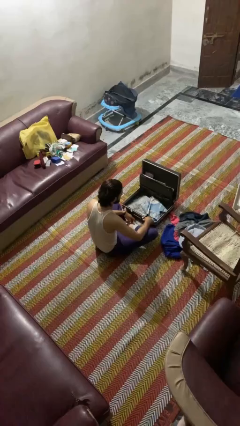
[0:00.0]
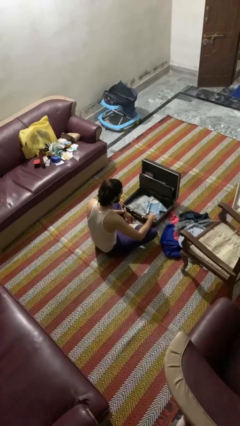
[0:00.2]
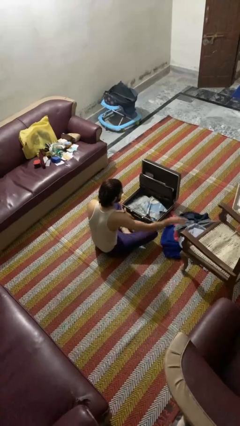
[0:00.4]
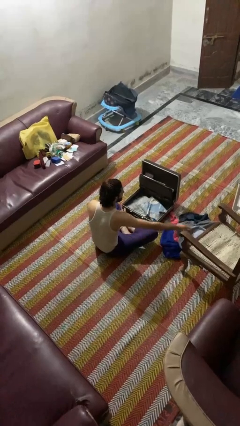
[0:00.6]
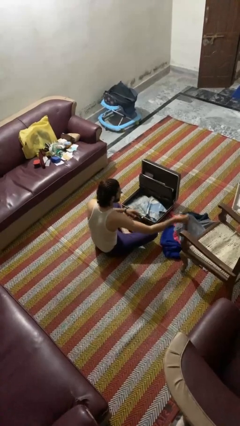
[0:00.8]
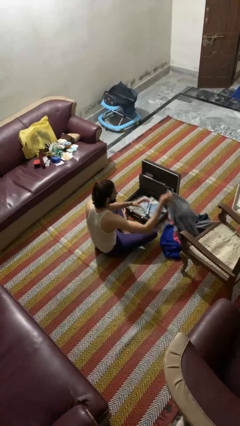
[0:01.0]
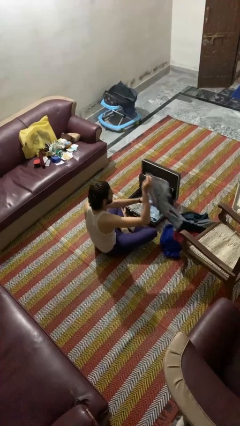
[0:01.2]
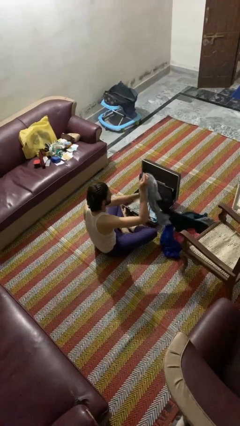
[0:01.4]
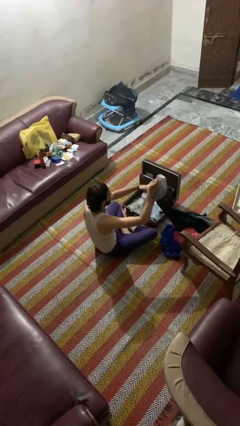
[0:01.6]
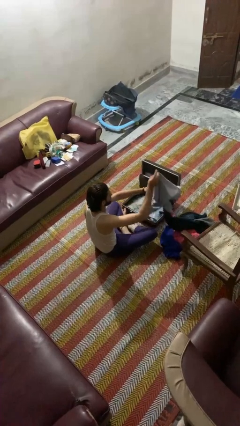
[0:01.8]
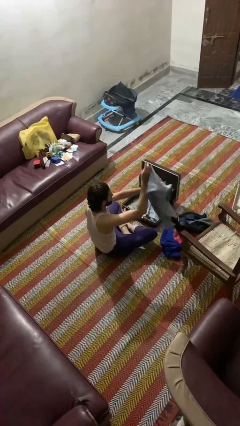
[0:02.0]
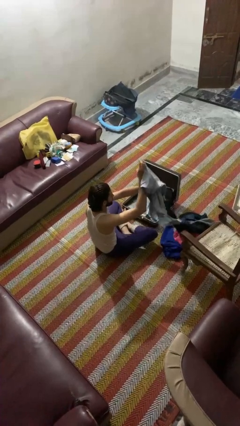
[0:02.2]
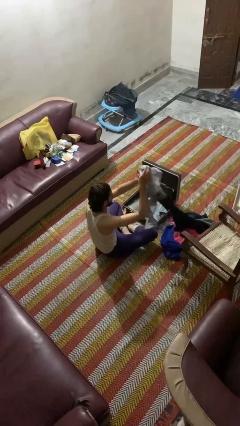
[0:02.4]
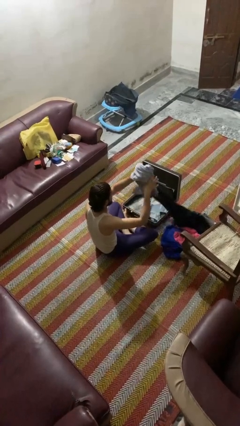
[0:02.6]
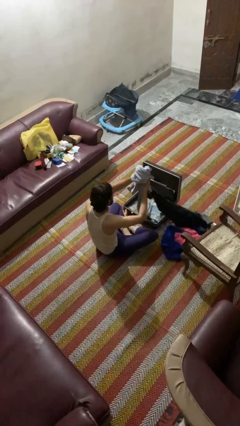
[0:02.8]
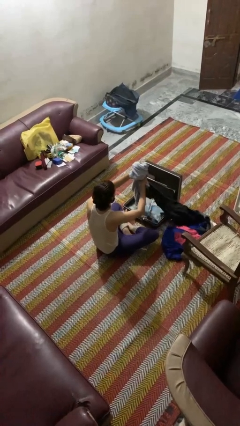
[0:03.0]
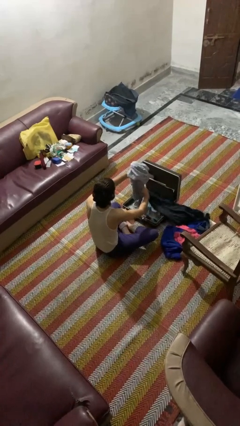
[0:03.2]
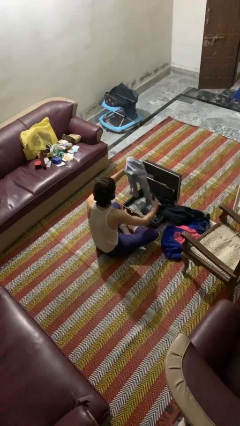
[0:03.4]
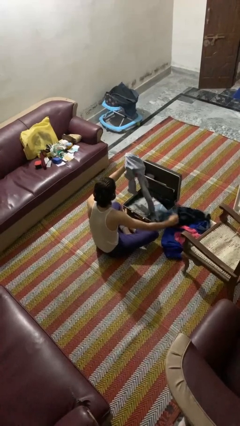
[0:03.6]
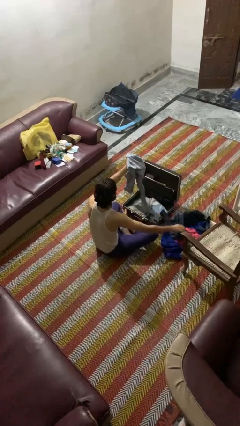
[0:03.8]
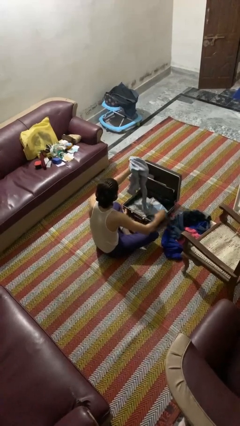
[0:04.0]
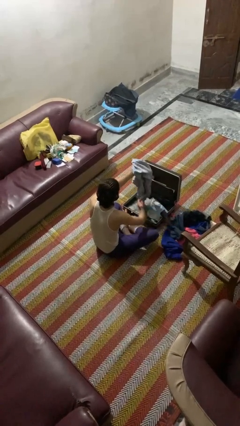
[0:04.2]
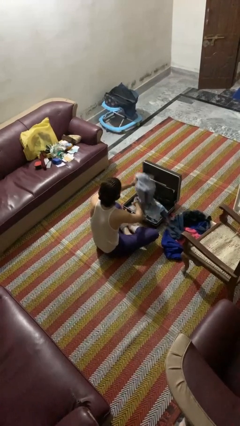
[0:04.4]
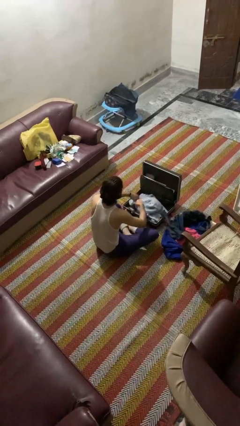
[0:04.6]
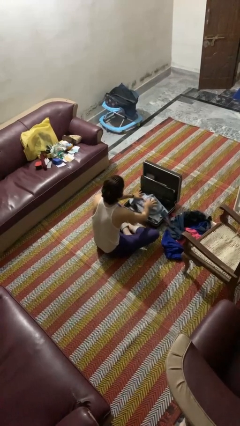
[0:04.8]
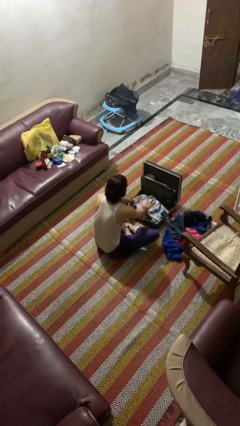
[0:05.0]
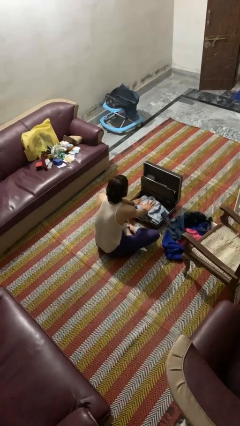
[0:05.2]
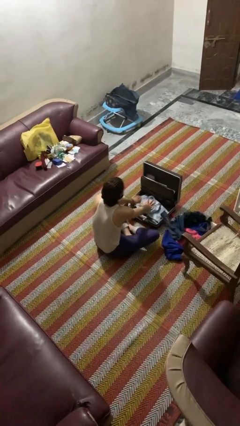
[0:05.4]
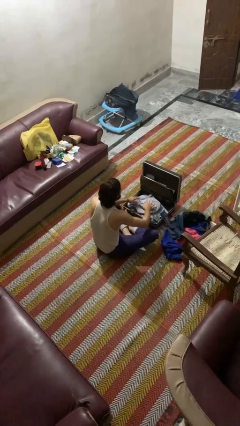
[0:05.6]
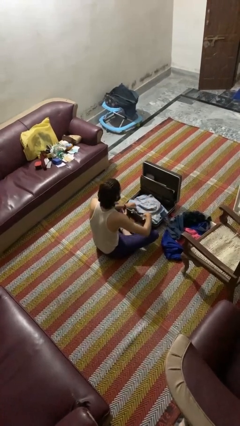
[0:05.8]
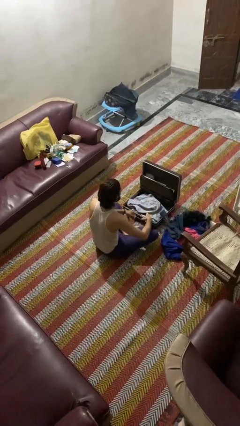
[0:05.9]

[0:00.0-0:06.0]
person loads clothes into suitcase

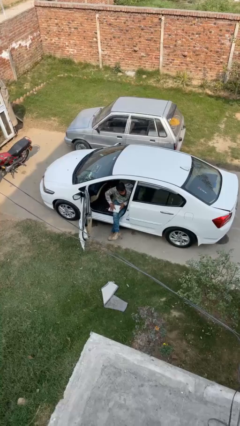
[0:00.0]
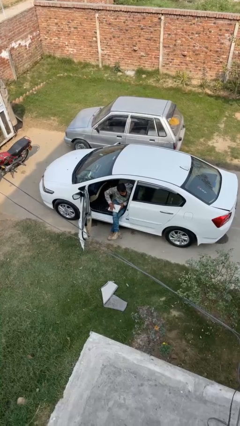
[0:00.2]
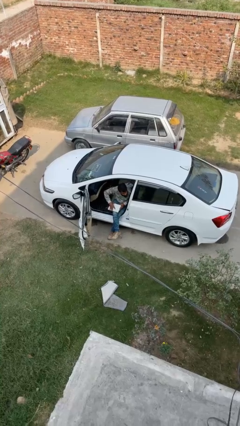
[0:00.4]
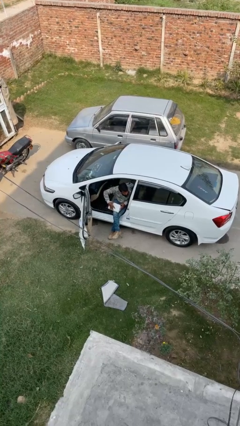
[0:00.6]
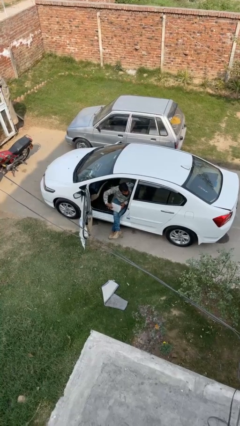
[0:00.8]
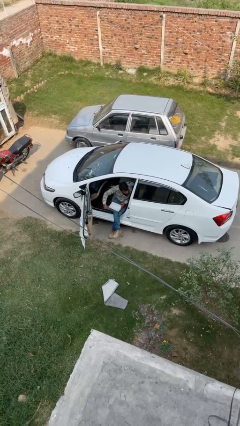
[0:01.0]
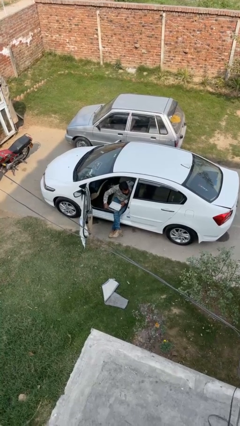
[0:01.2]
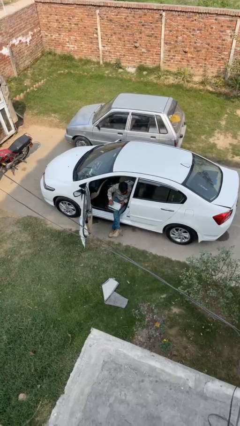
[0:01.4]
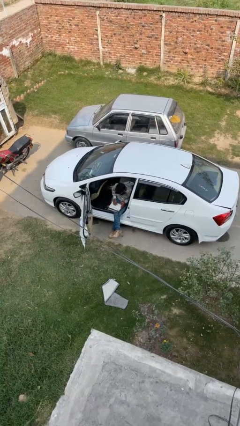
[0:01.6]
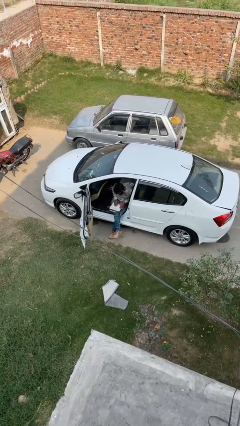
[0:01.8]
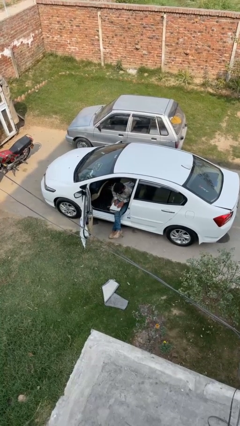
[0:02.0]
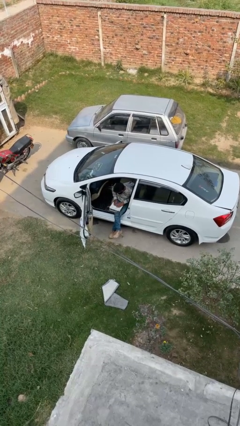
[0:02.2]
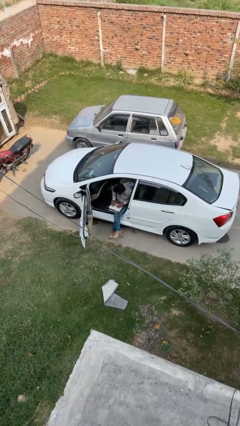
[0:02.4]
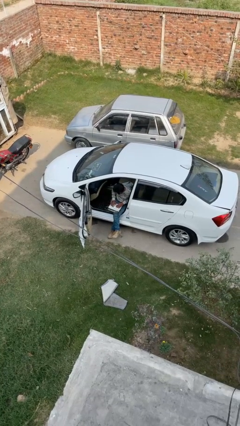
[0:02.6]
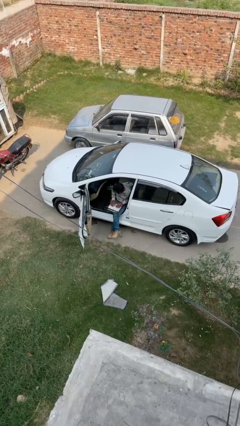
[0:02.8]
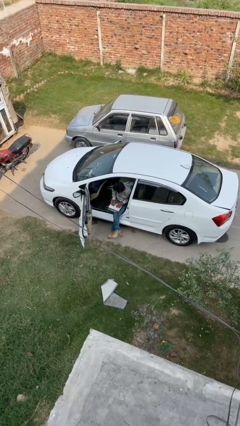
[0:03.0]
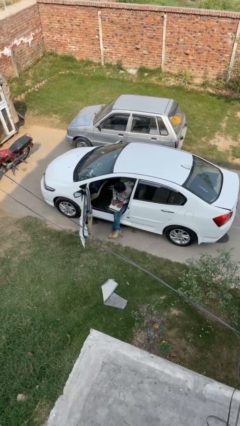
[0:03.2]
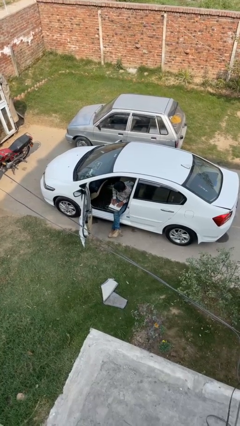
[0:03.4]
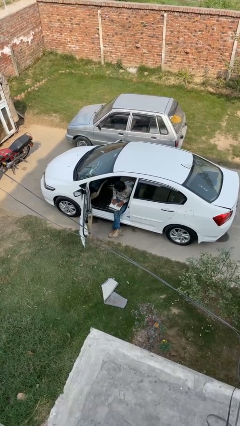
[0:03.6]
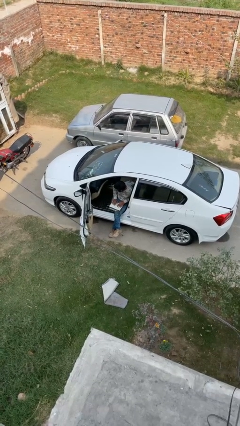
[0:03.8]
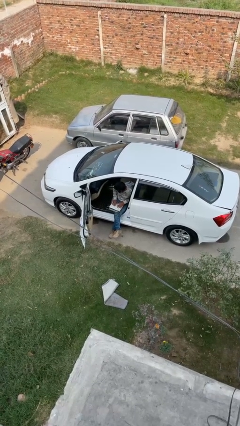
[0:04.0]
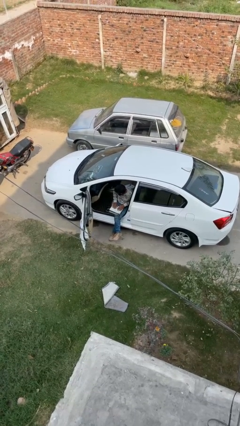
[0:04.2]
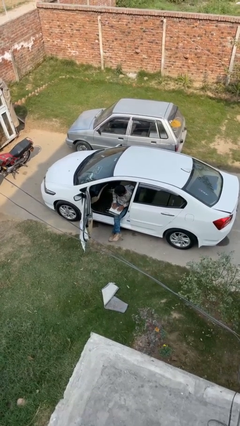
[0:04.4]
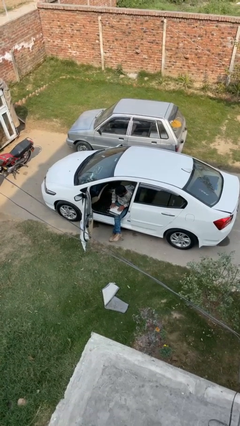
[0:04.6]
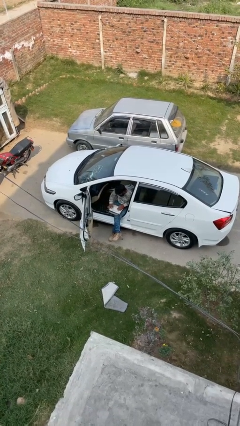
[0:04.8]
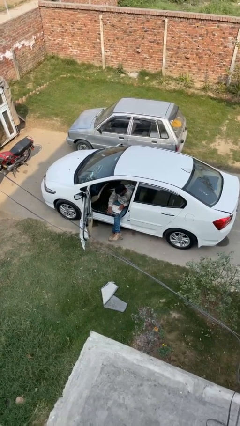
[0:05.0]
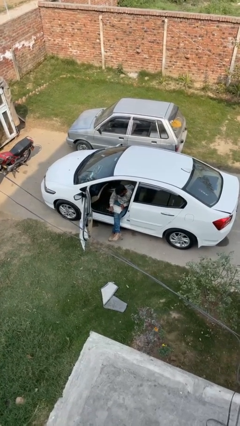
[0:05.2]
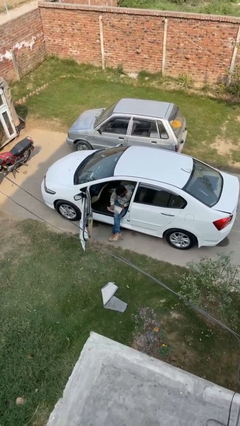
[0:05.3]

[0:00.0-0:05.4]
person interacts with laptop

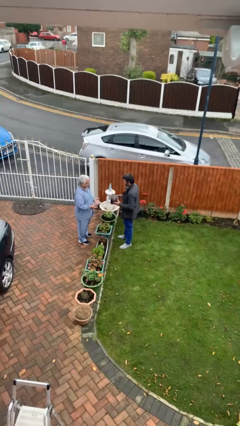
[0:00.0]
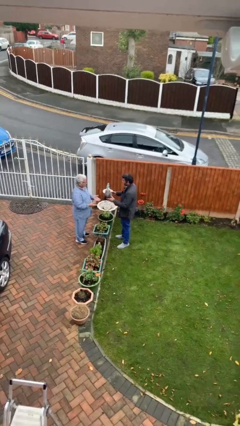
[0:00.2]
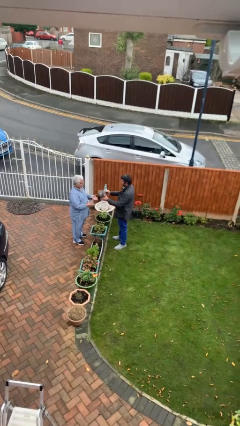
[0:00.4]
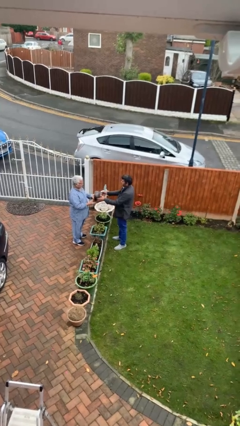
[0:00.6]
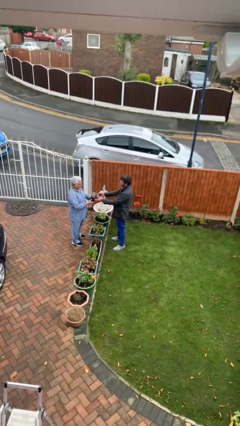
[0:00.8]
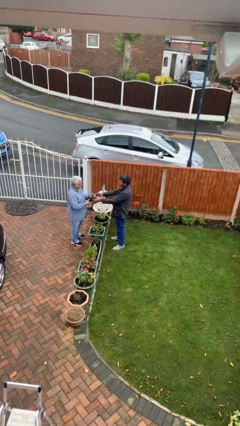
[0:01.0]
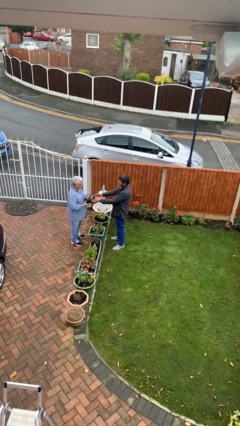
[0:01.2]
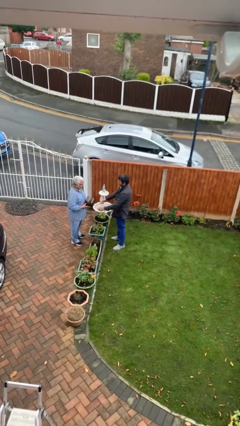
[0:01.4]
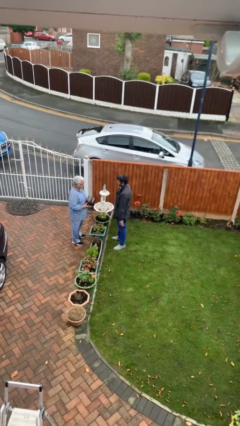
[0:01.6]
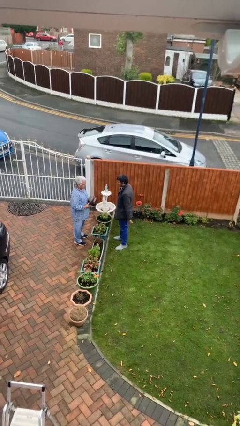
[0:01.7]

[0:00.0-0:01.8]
person transfers object to person

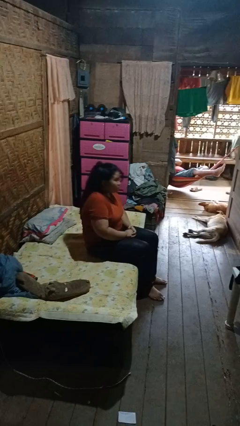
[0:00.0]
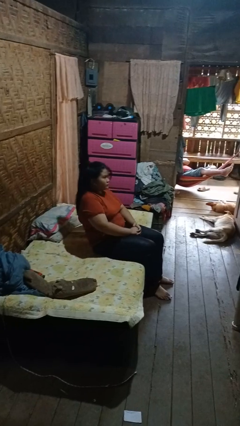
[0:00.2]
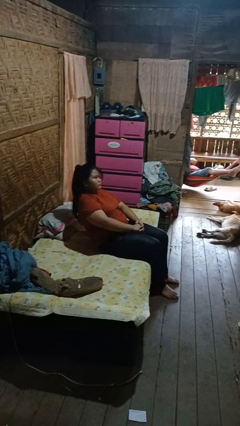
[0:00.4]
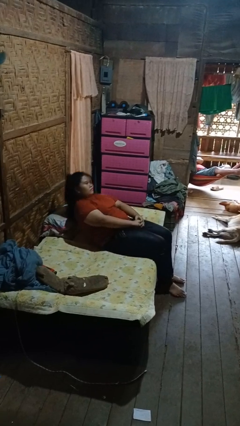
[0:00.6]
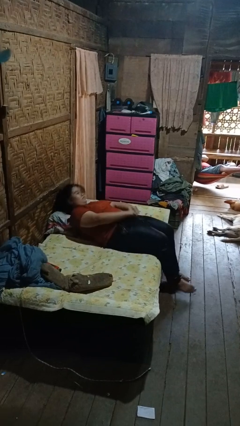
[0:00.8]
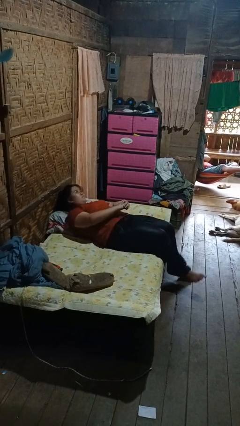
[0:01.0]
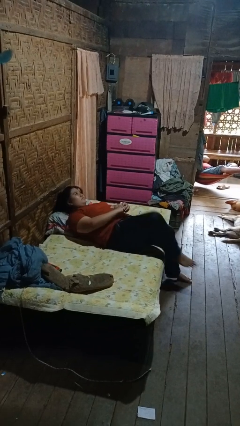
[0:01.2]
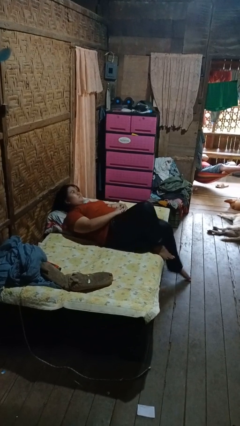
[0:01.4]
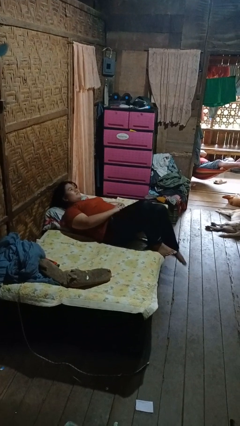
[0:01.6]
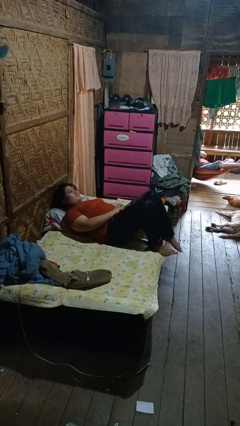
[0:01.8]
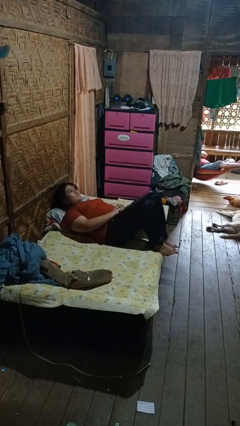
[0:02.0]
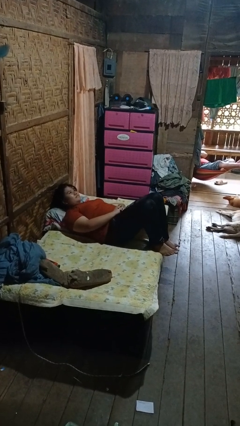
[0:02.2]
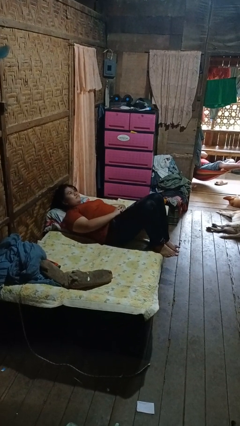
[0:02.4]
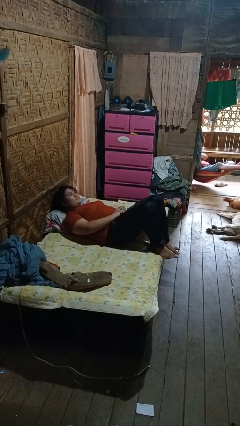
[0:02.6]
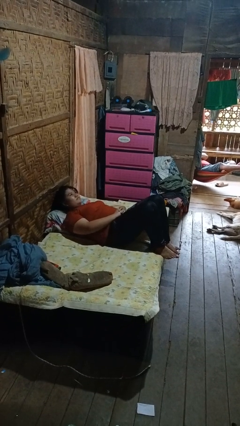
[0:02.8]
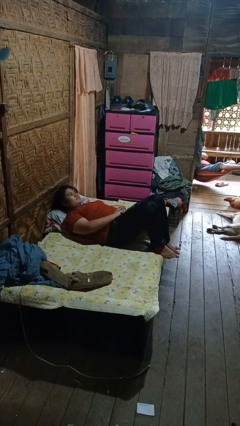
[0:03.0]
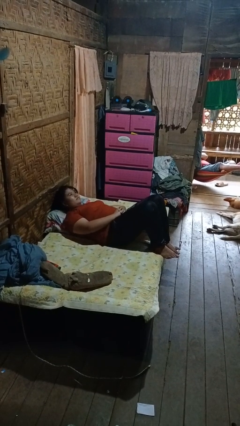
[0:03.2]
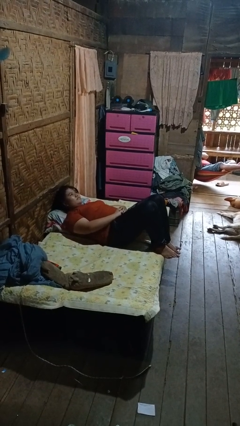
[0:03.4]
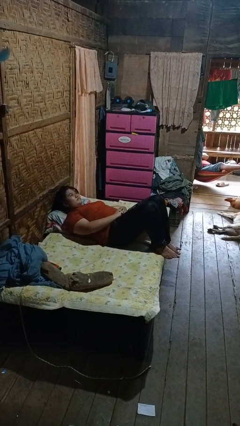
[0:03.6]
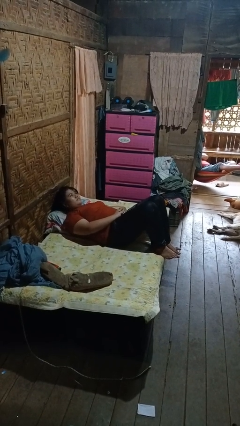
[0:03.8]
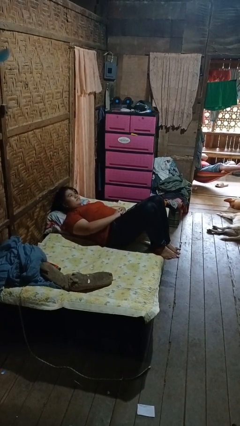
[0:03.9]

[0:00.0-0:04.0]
person lies down on bed

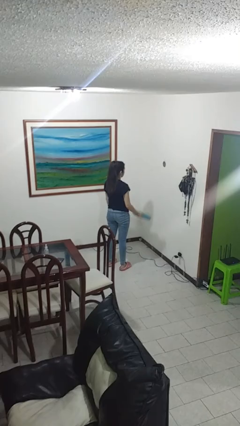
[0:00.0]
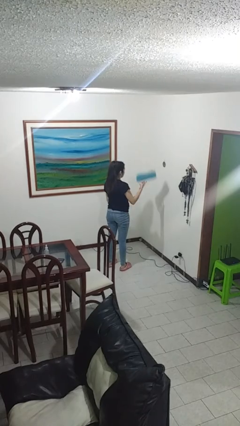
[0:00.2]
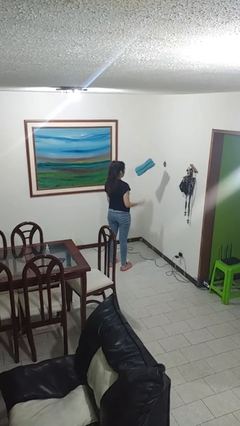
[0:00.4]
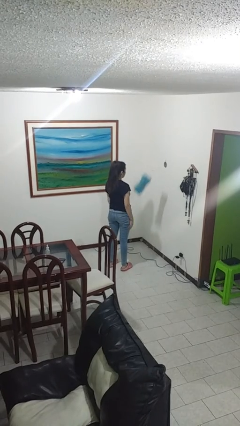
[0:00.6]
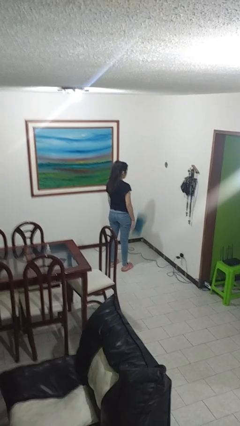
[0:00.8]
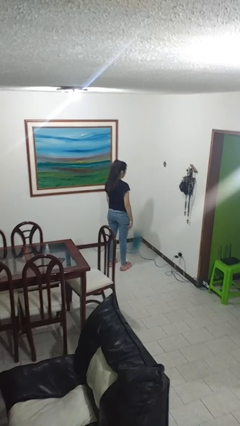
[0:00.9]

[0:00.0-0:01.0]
person throws object into air
